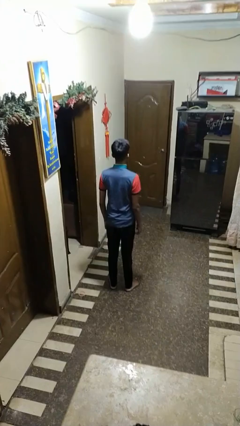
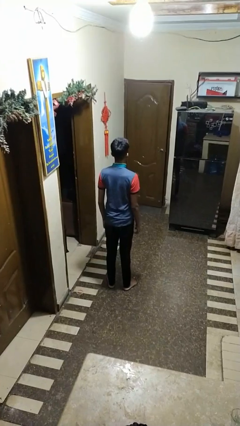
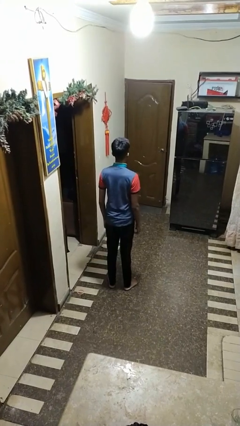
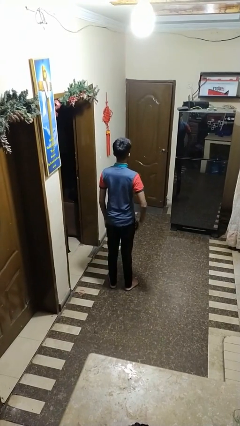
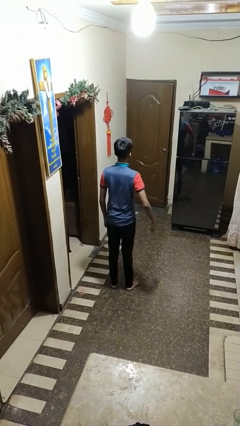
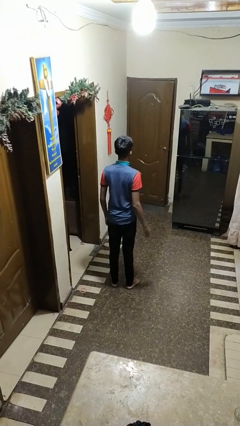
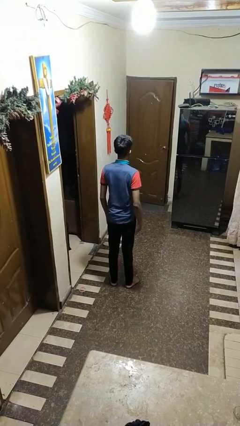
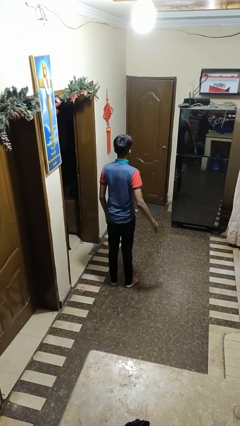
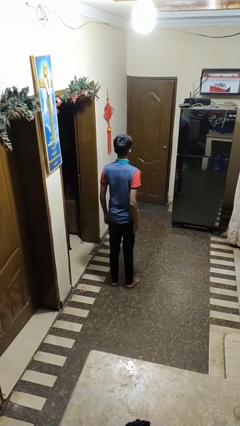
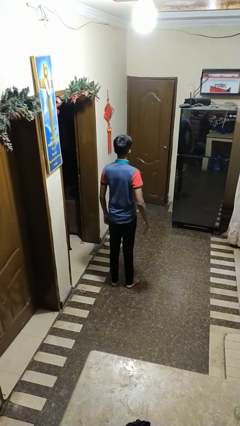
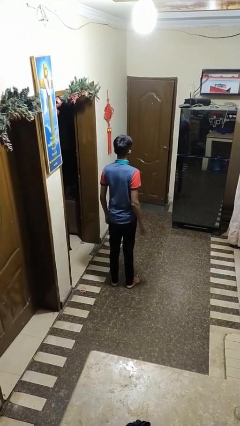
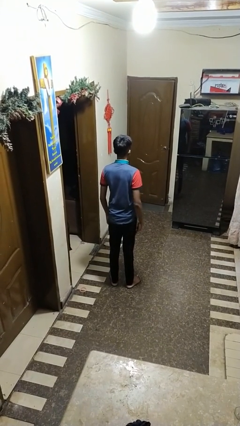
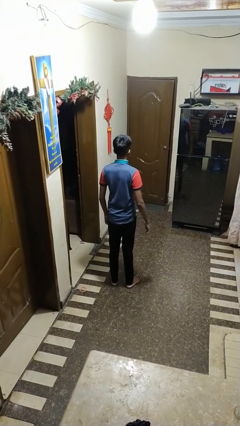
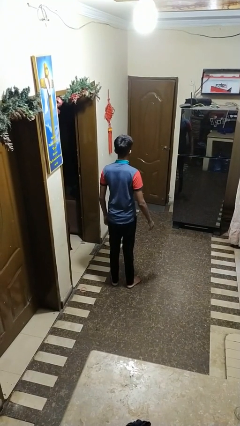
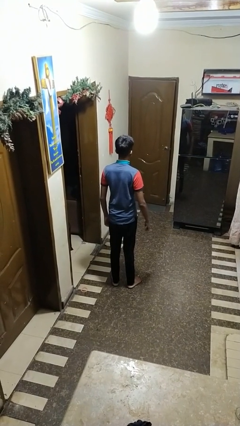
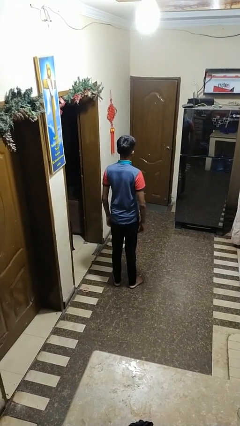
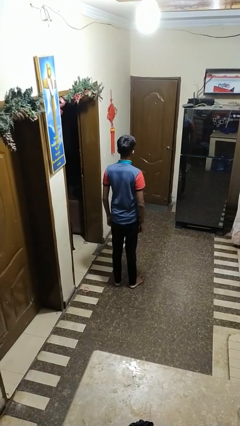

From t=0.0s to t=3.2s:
person slaps hands on thighs

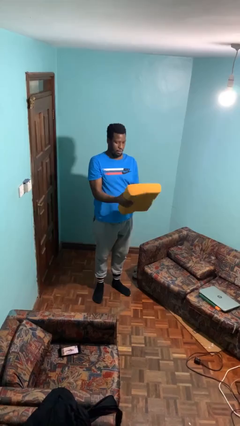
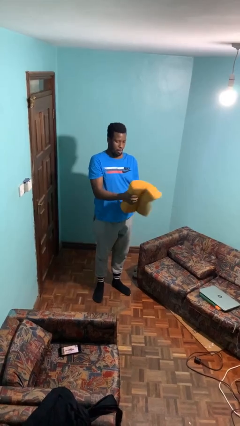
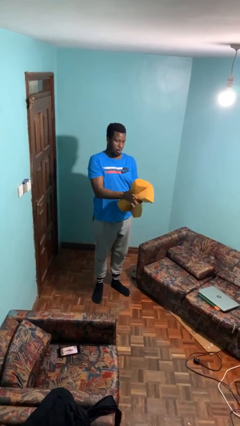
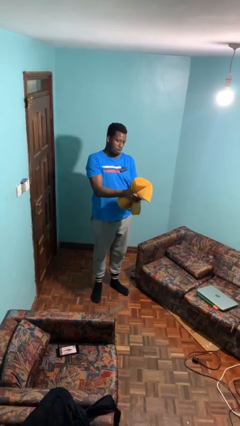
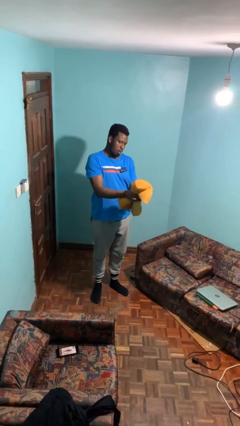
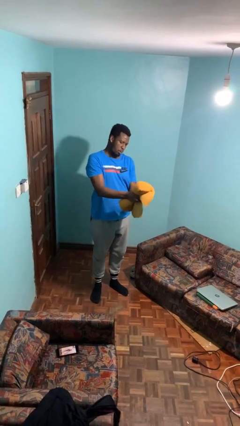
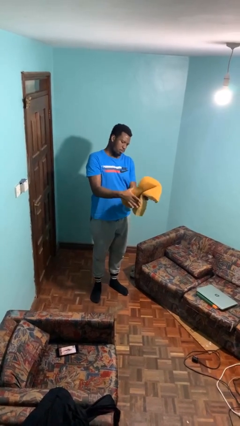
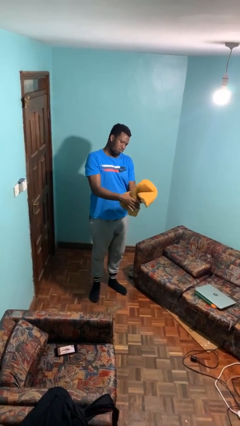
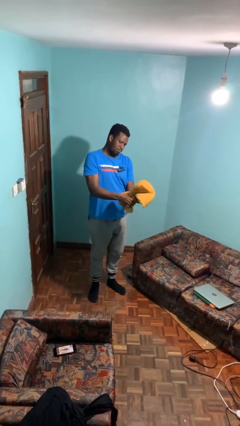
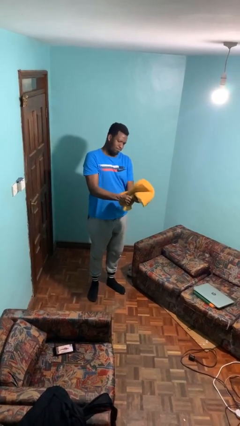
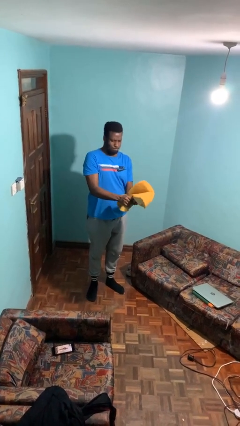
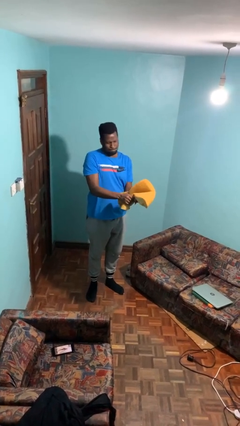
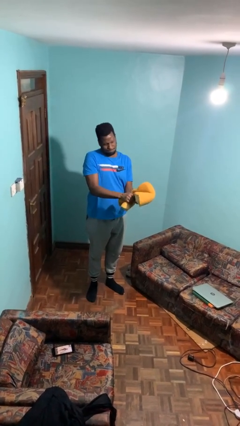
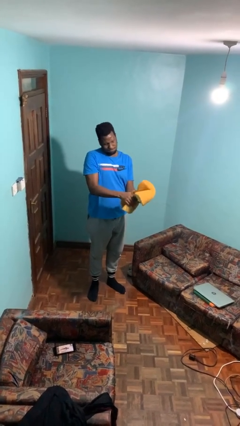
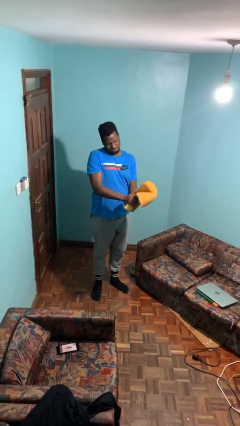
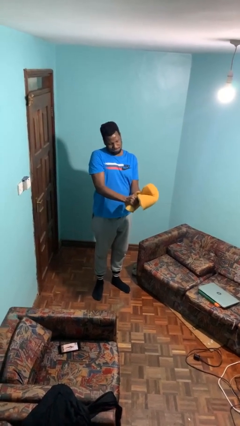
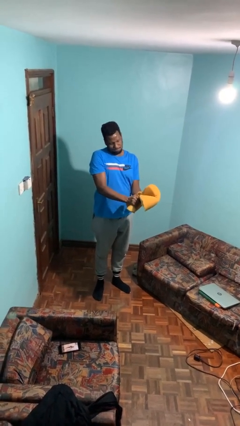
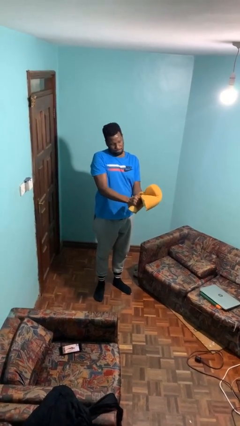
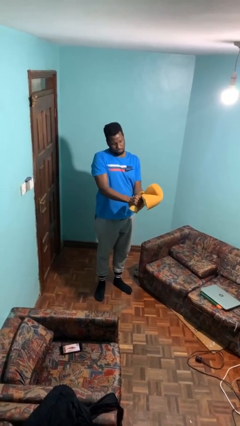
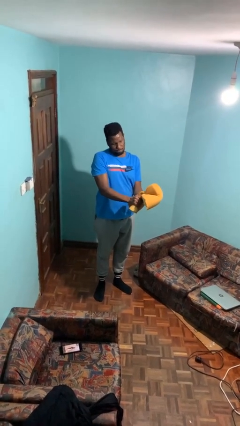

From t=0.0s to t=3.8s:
person squeezes object

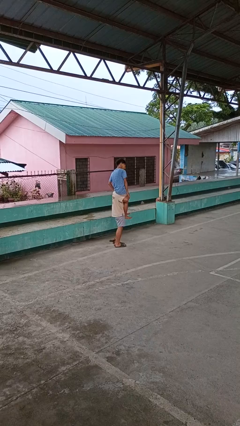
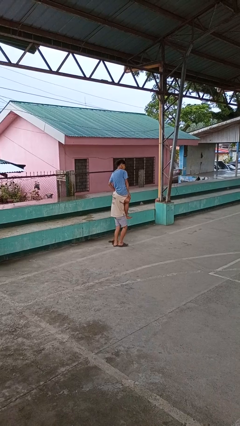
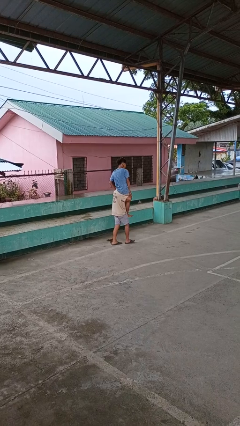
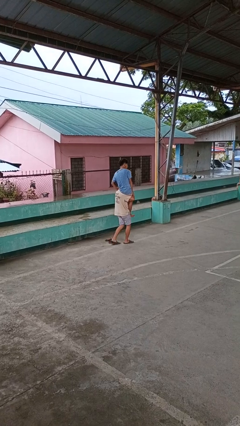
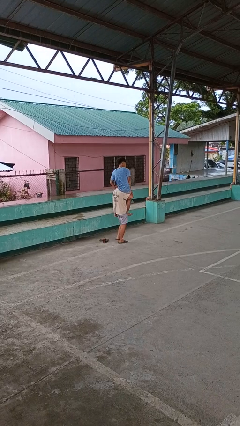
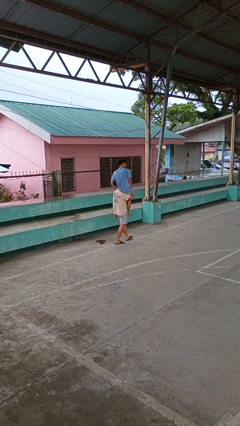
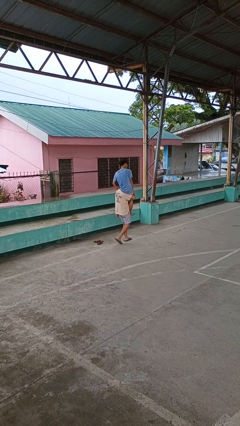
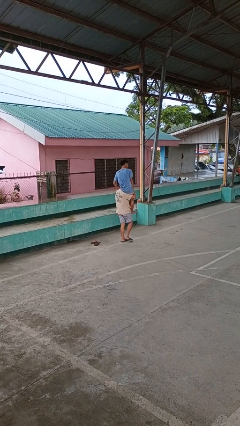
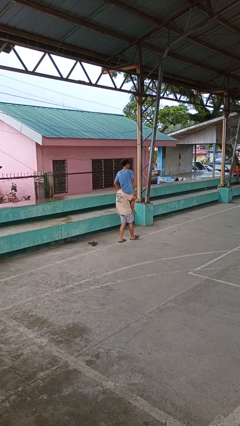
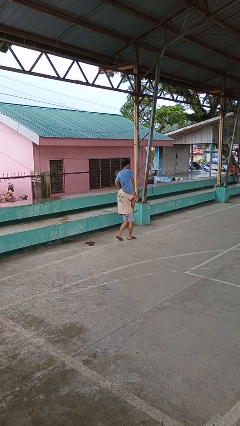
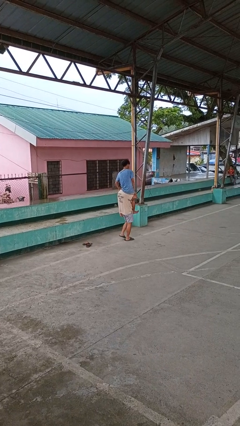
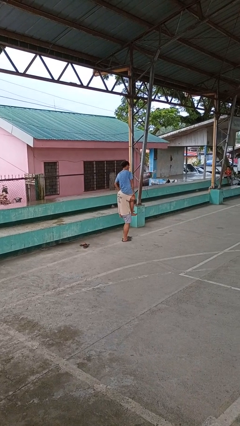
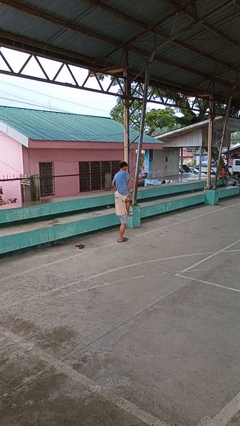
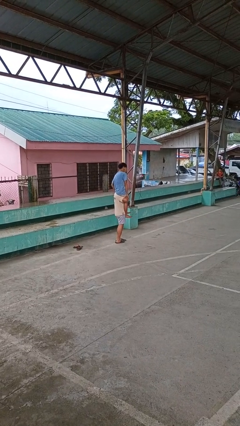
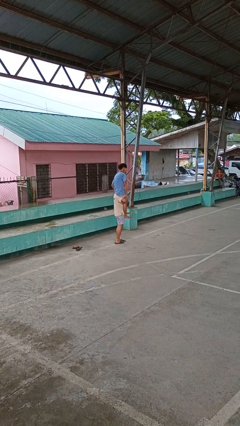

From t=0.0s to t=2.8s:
person carries person on shoulders

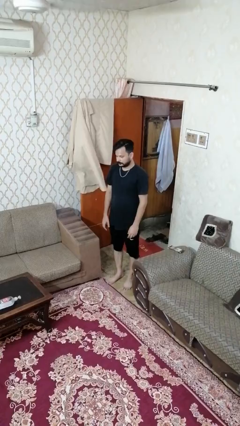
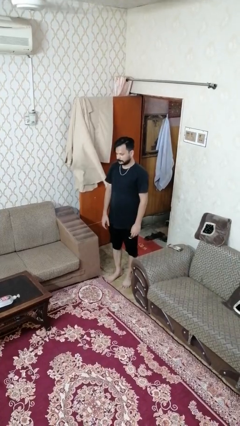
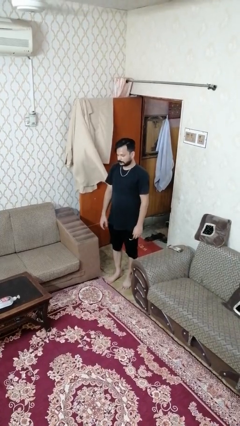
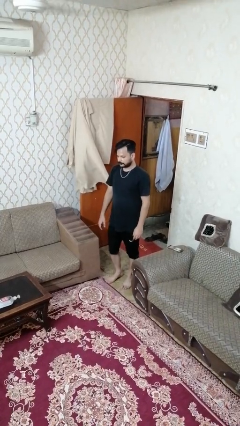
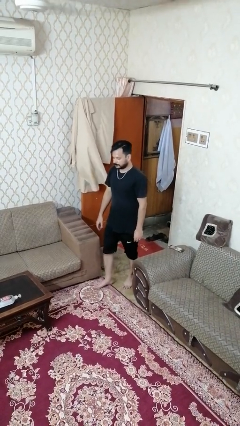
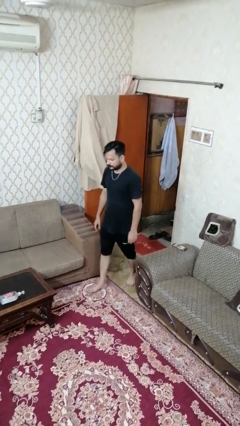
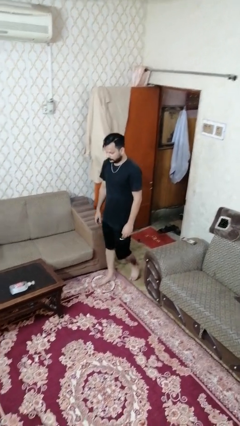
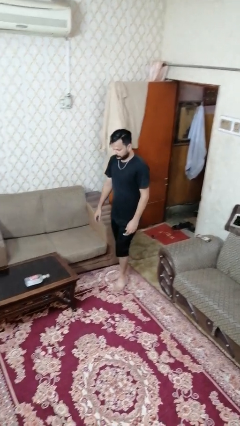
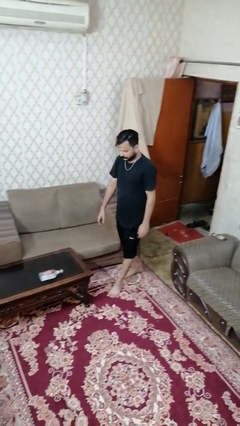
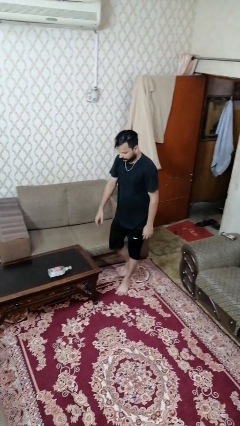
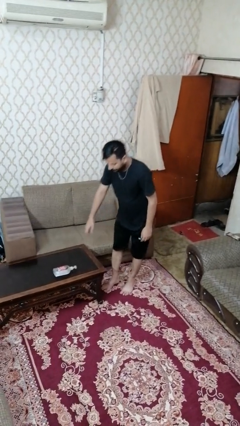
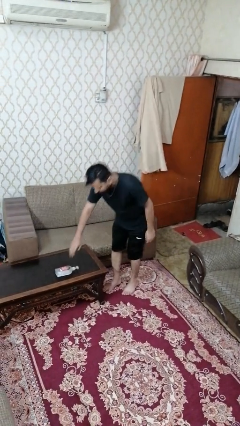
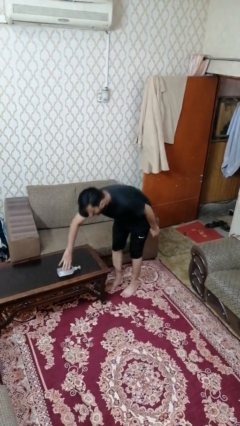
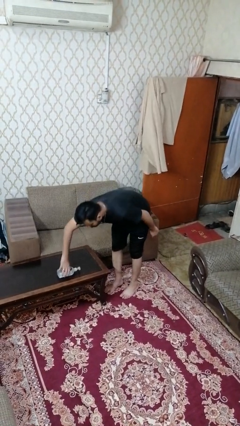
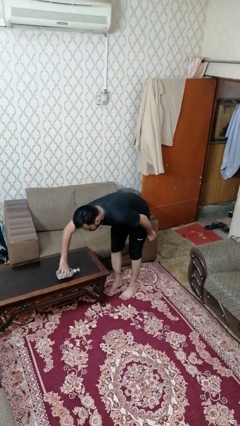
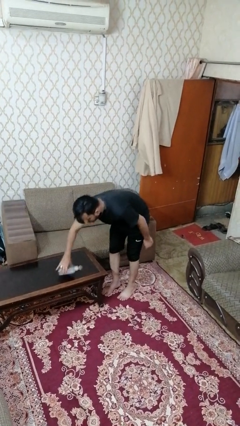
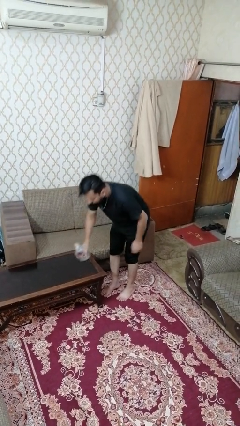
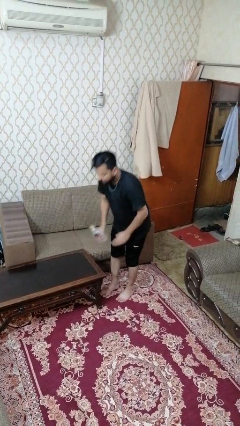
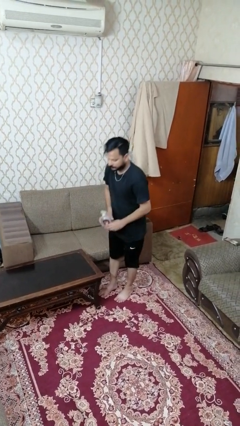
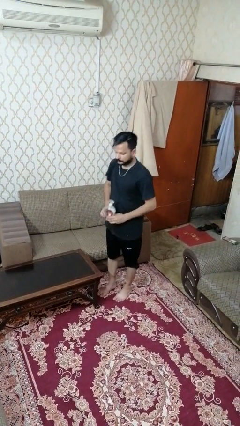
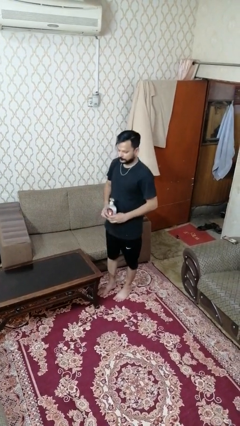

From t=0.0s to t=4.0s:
person picks up object from table

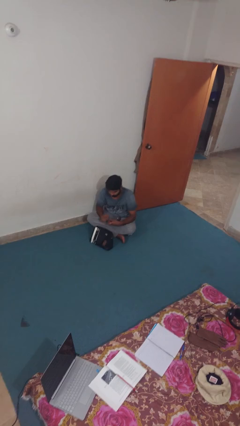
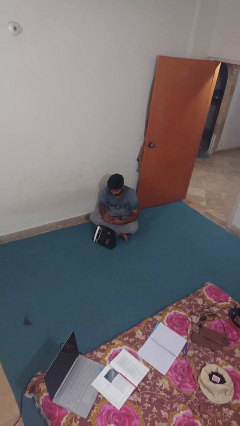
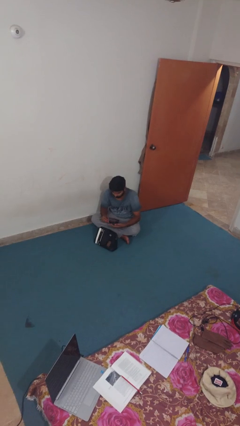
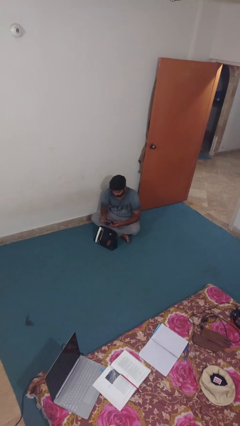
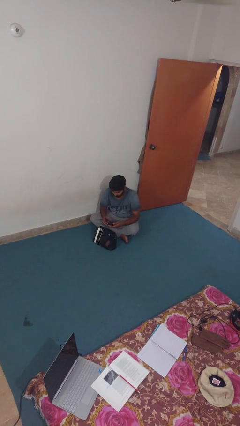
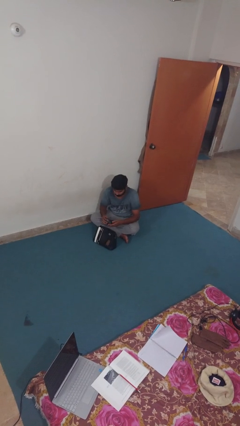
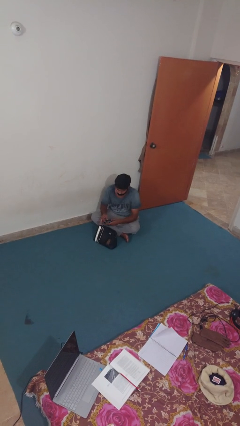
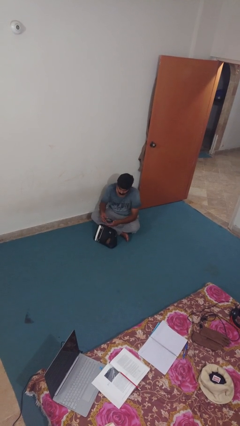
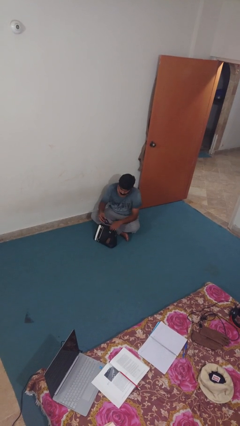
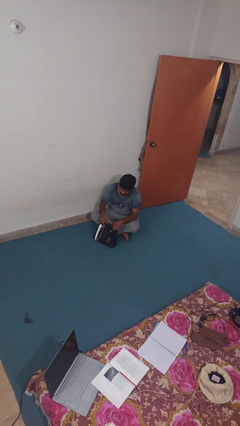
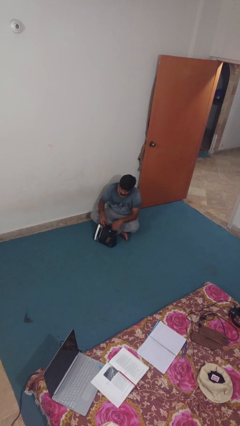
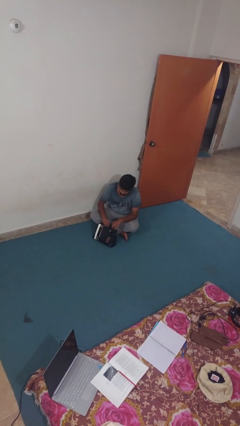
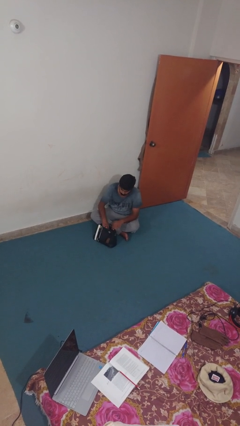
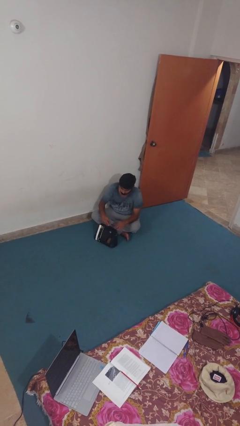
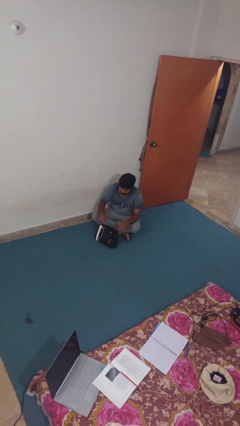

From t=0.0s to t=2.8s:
person puts object into purse

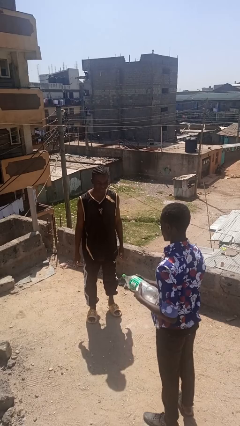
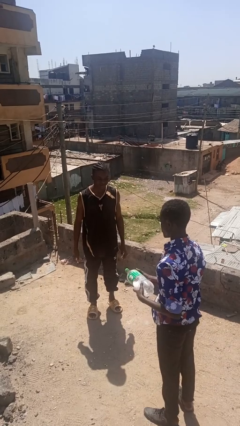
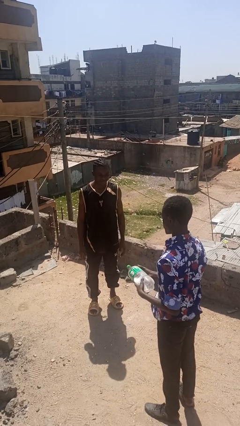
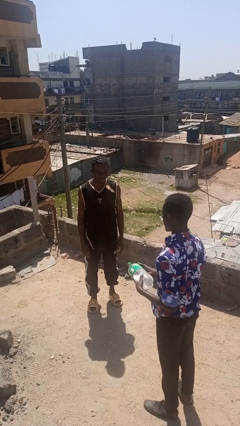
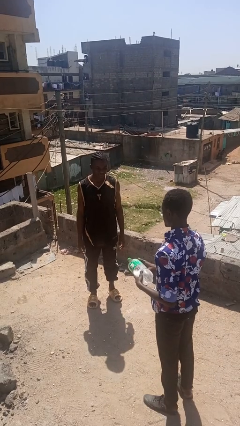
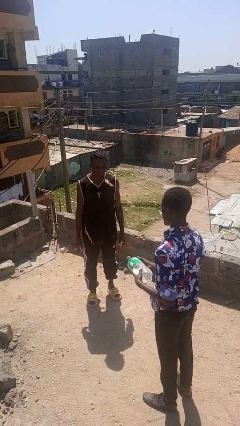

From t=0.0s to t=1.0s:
person catches object from person
